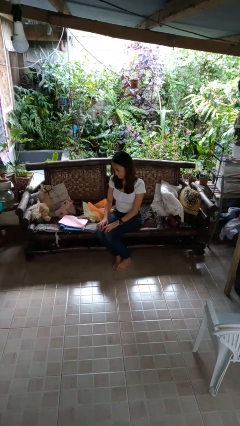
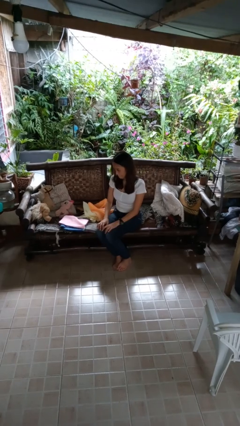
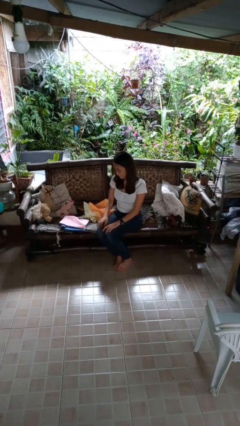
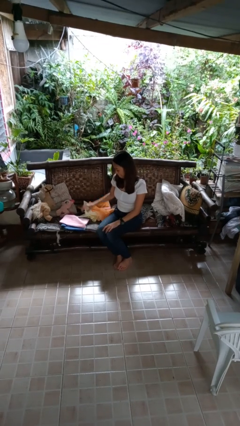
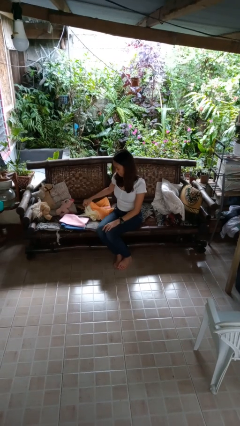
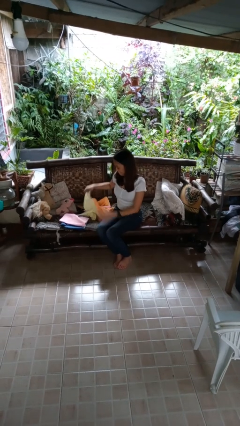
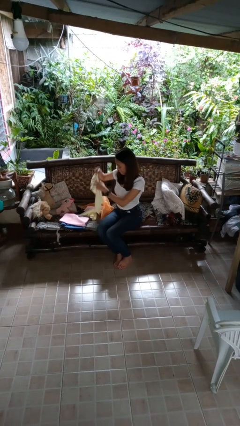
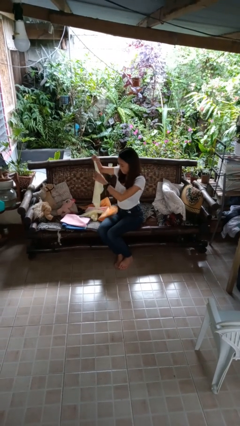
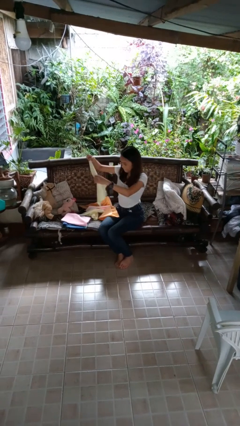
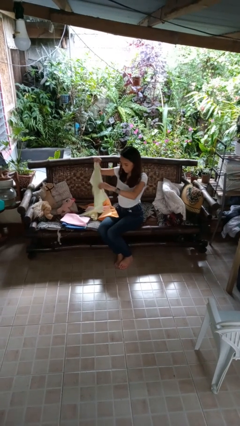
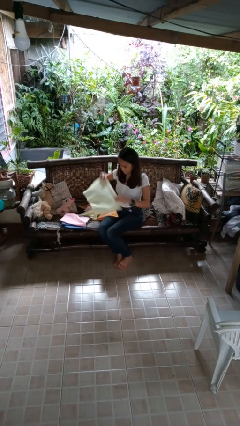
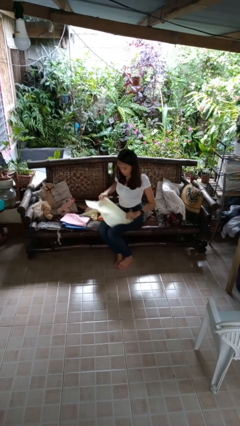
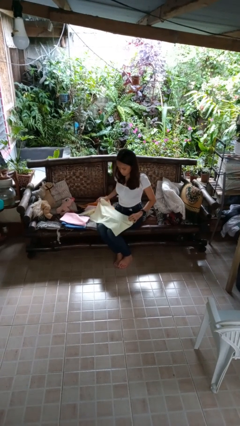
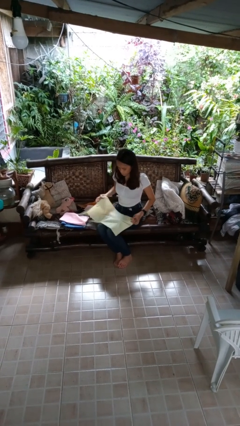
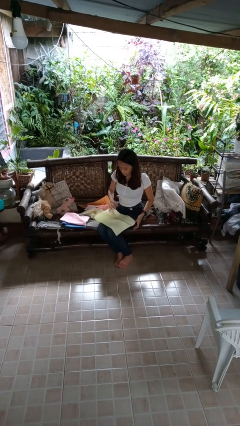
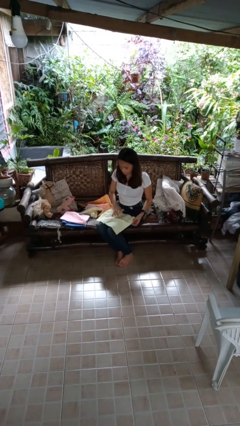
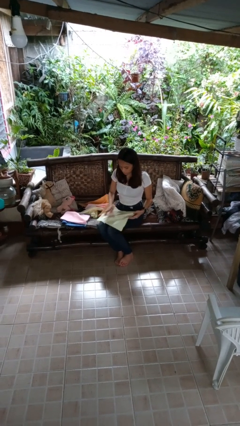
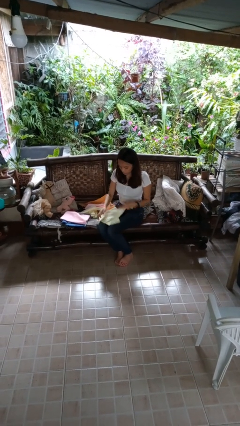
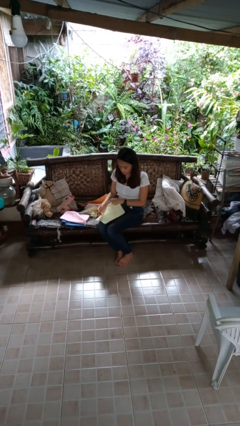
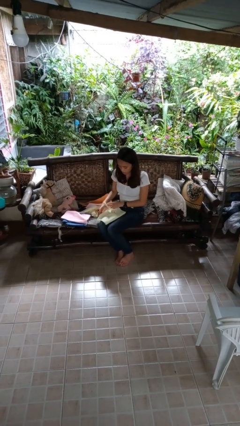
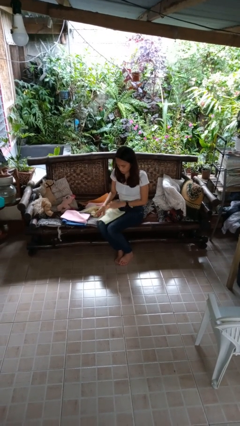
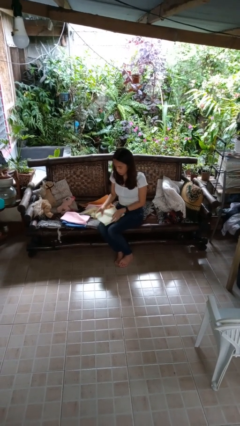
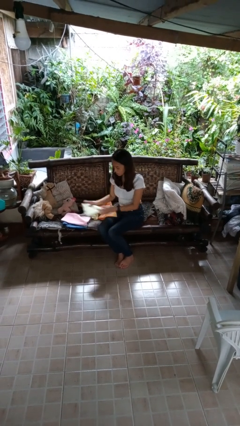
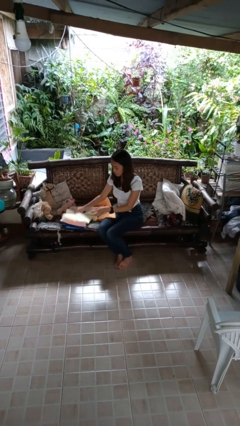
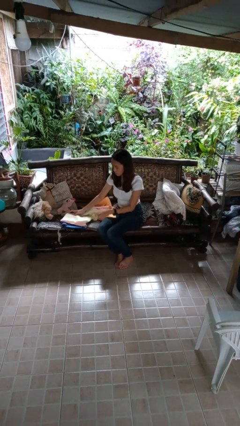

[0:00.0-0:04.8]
person folds towel

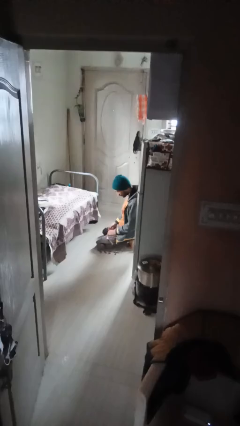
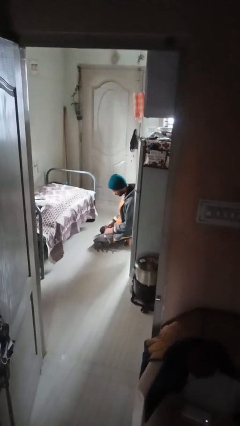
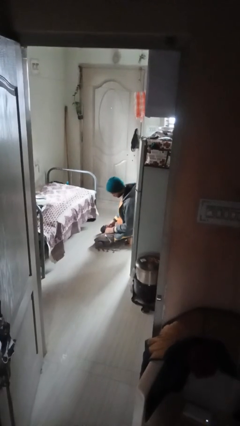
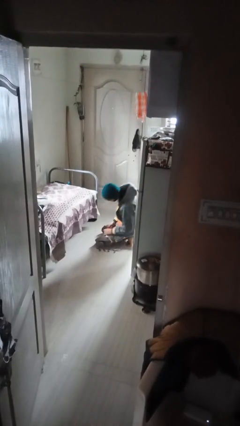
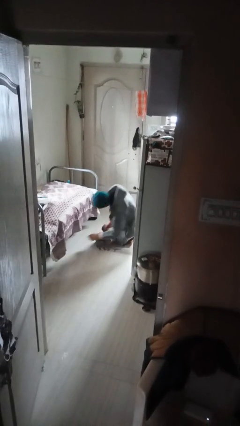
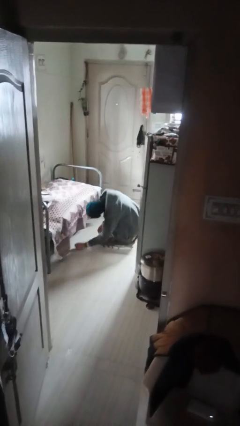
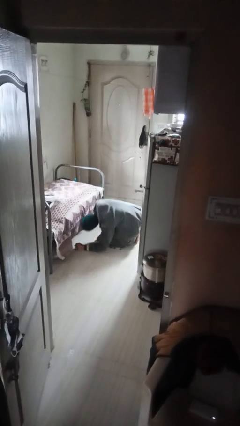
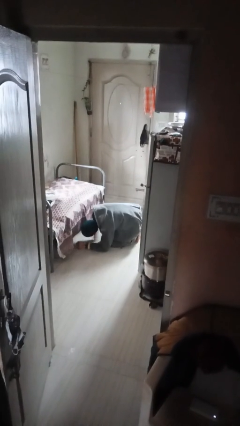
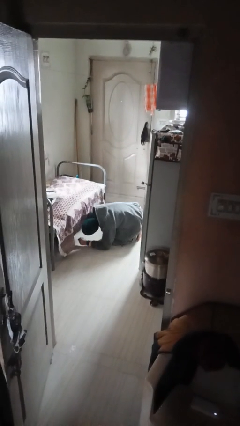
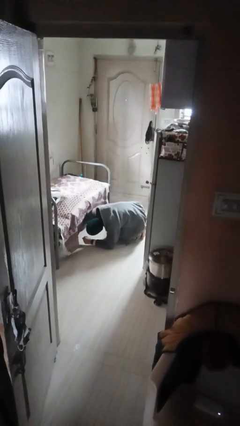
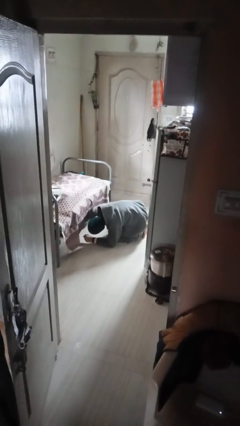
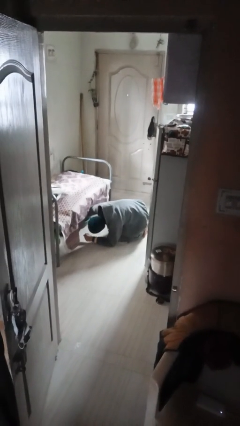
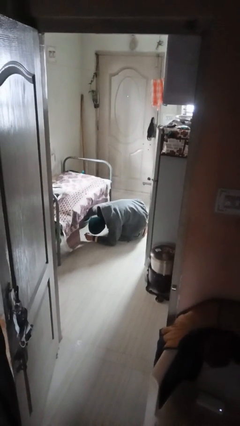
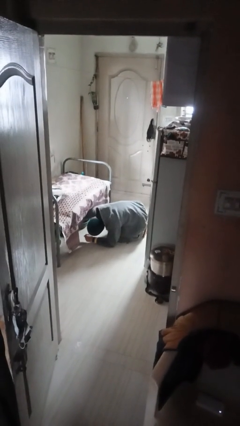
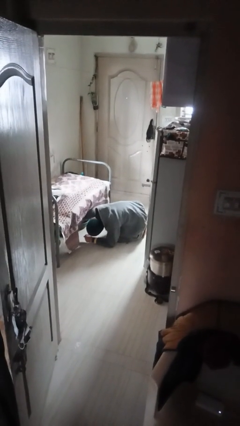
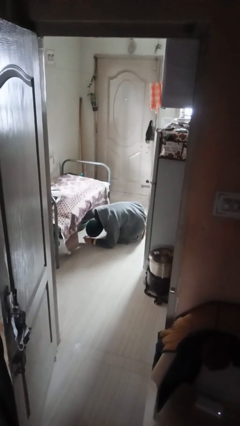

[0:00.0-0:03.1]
person searches under bed

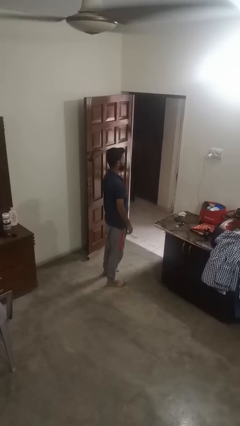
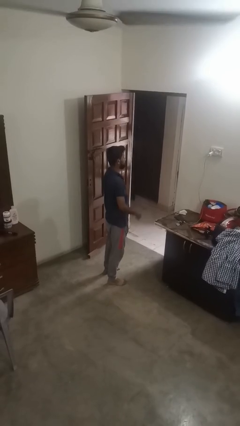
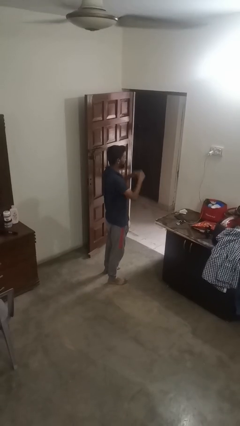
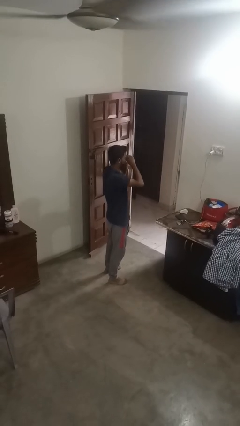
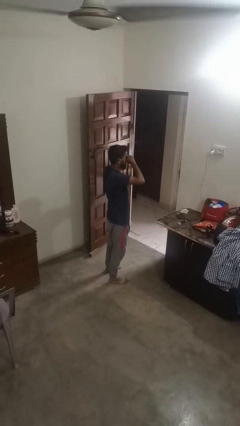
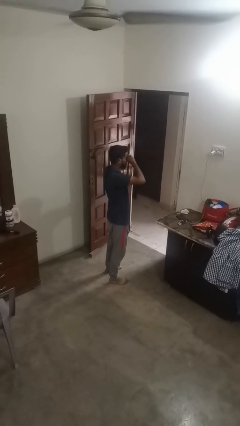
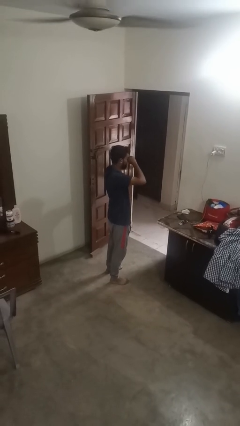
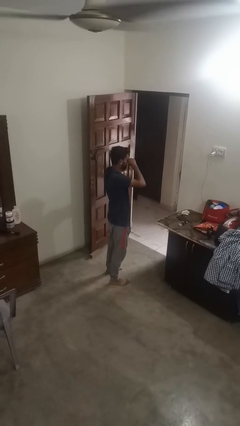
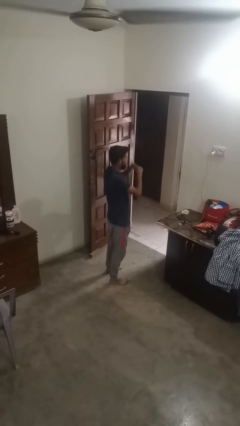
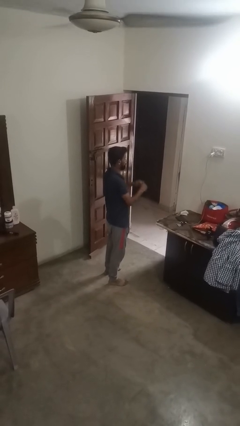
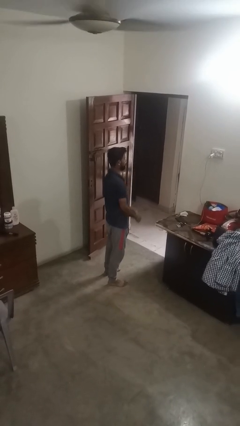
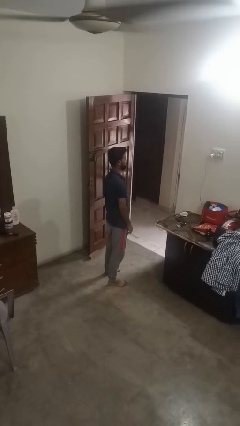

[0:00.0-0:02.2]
person rubs eyes

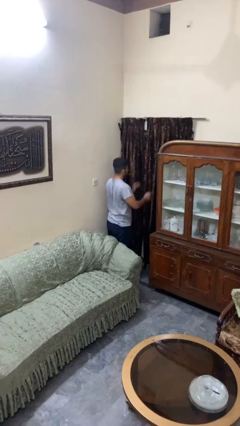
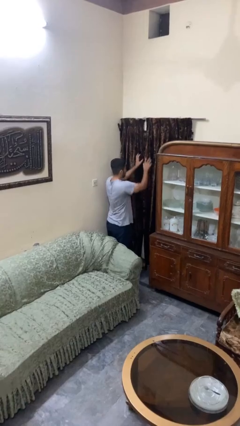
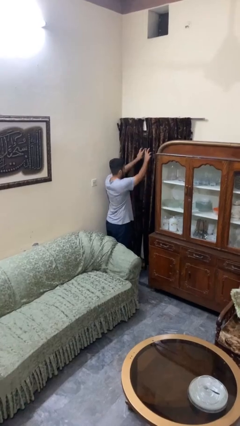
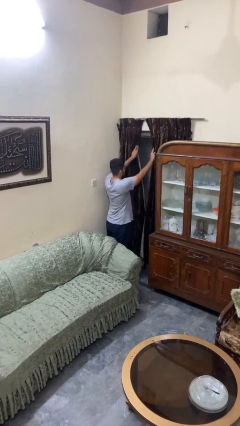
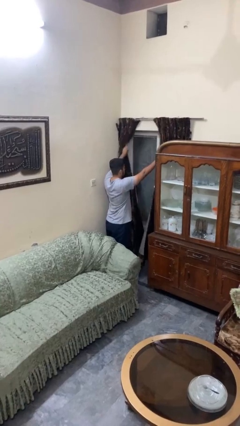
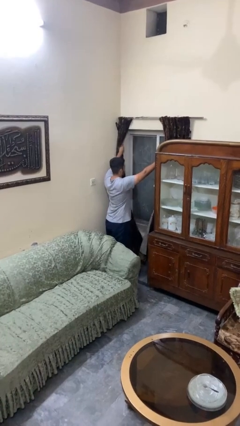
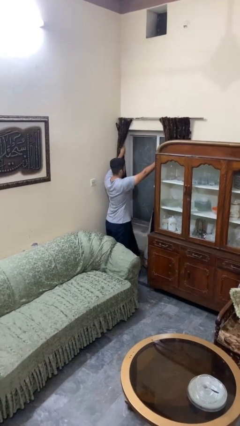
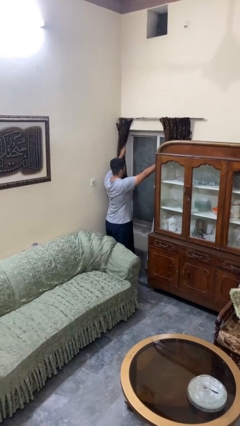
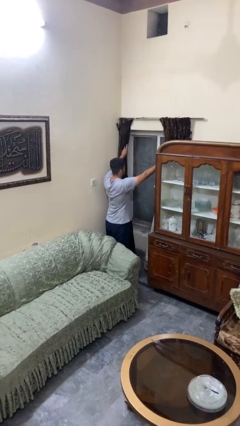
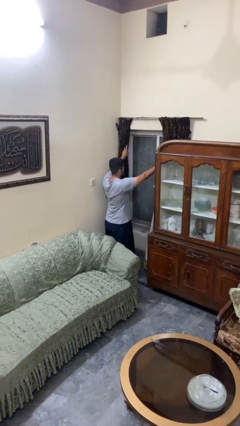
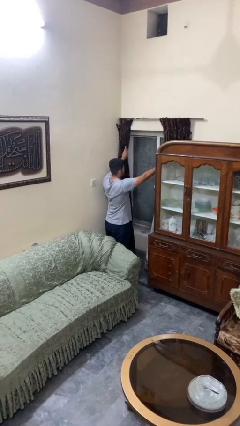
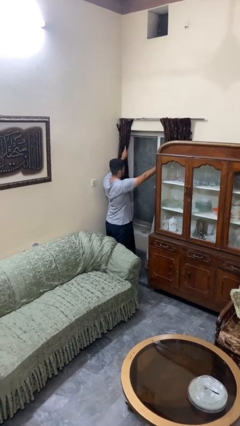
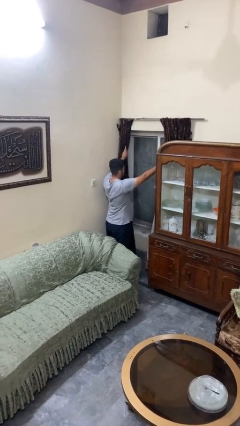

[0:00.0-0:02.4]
person opens curtains

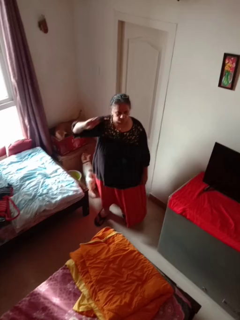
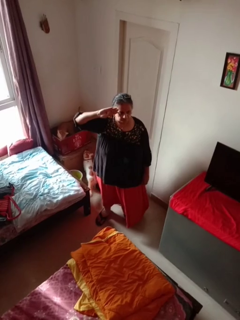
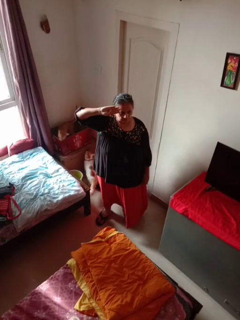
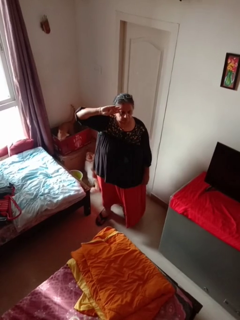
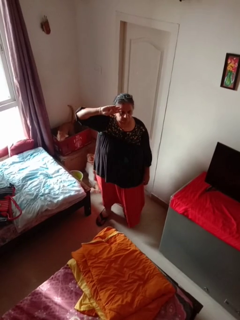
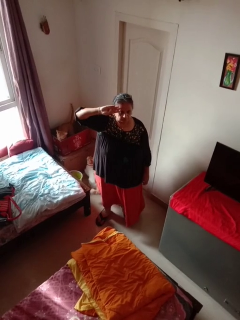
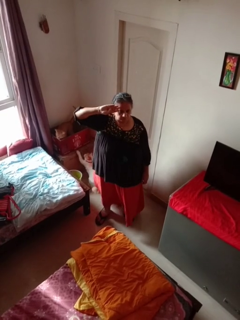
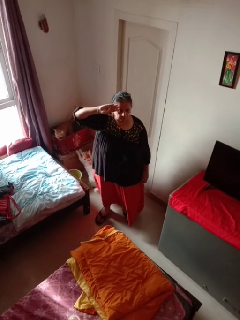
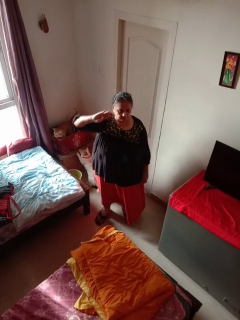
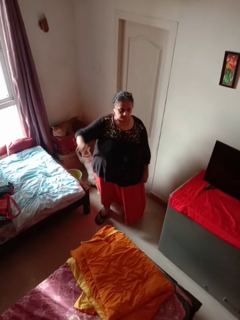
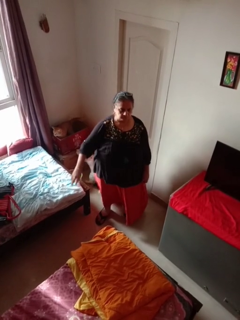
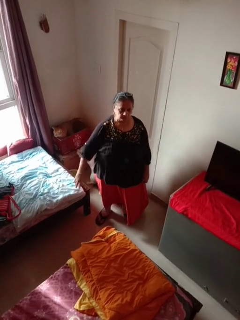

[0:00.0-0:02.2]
person salutes

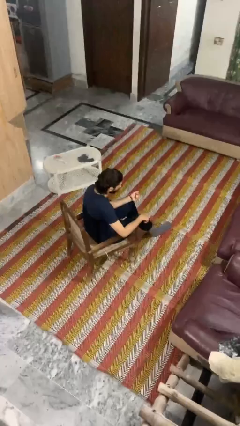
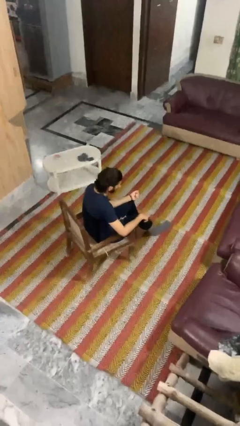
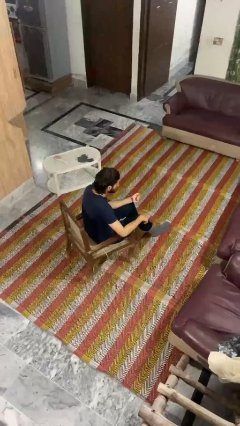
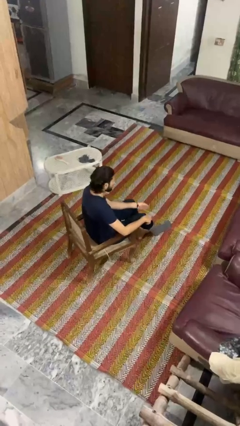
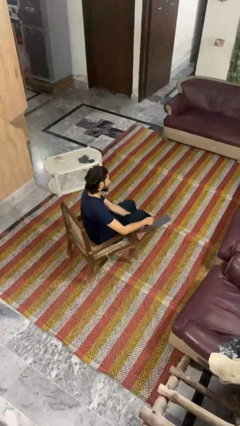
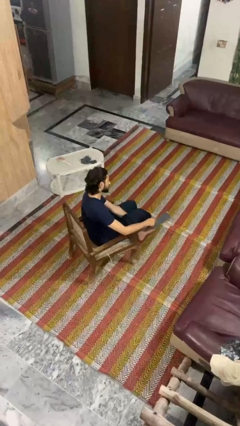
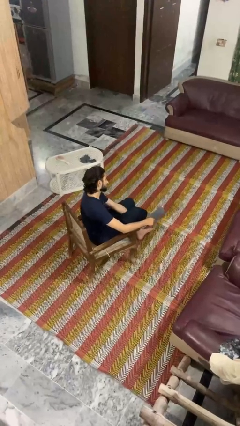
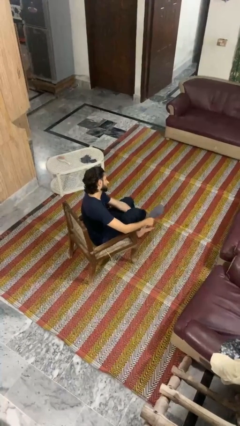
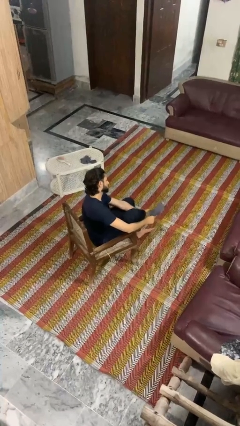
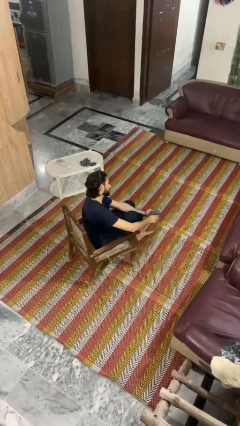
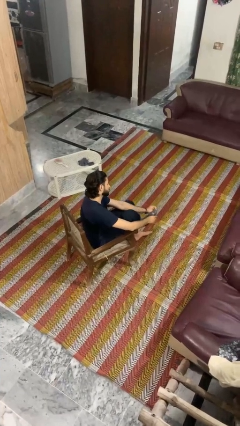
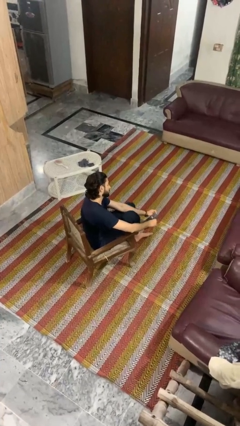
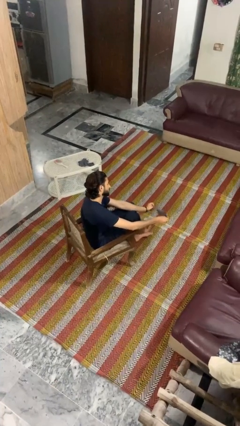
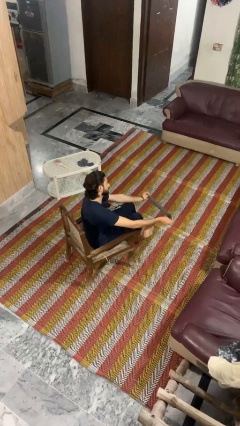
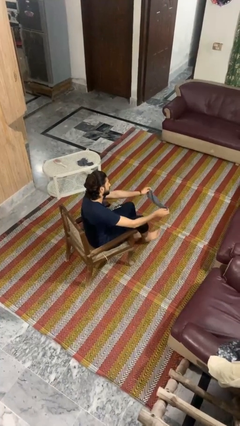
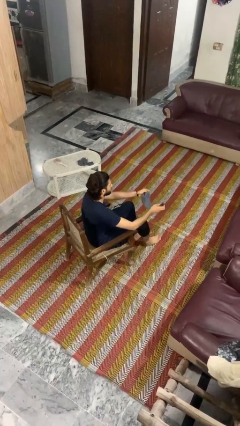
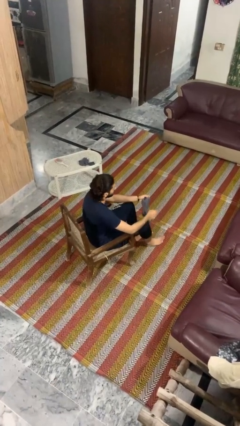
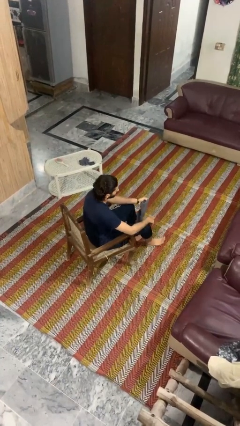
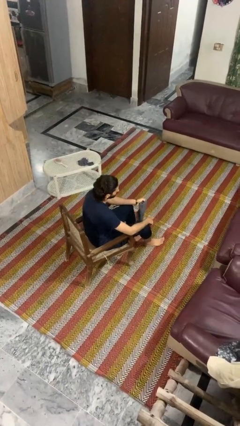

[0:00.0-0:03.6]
person takes off socks
